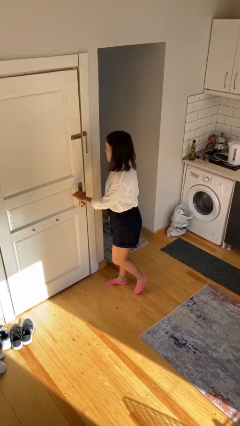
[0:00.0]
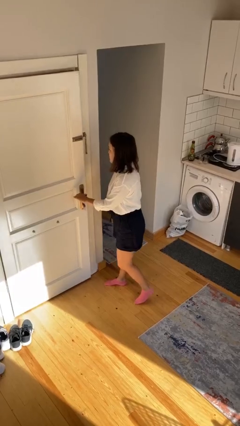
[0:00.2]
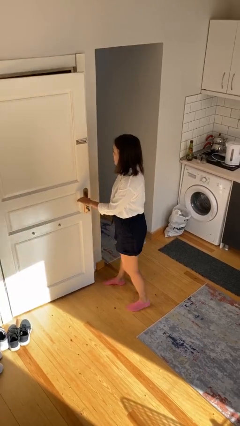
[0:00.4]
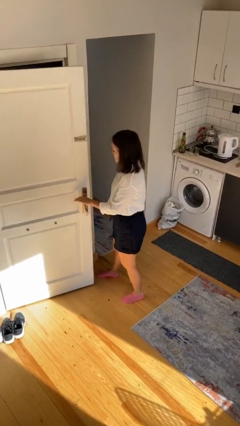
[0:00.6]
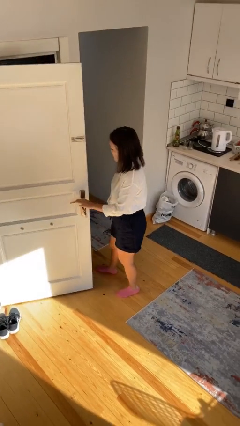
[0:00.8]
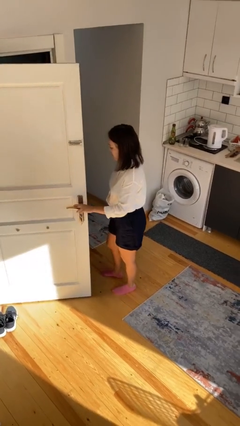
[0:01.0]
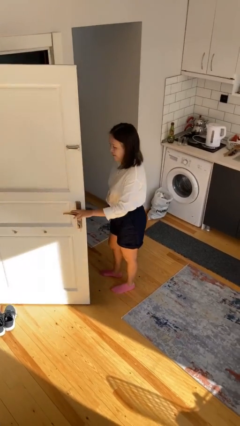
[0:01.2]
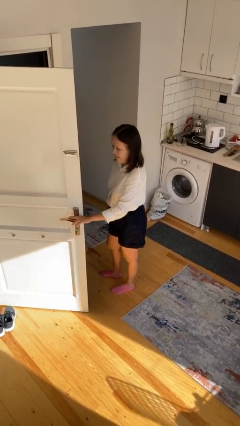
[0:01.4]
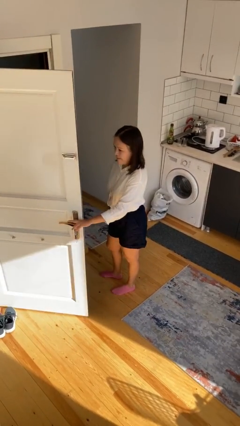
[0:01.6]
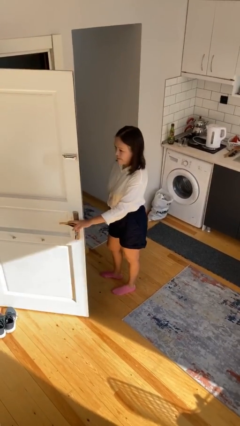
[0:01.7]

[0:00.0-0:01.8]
person opens facility door

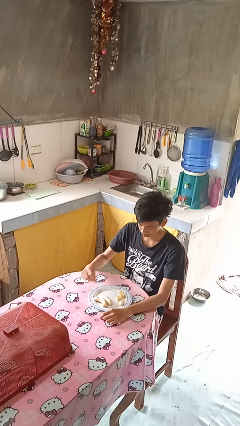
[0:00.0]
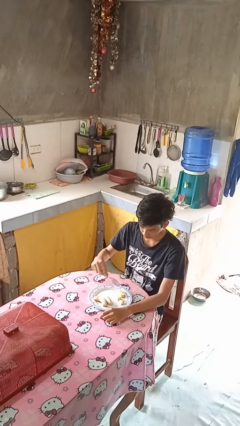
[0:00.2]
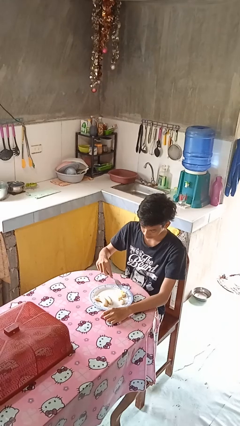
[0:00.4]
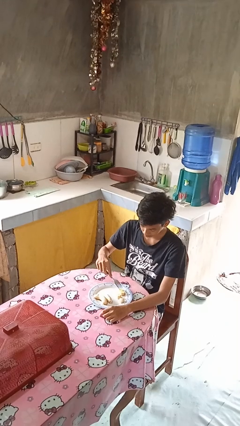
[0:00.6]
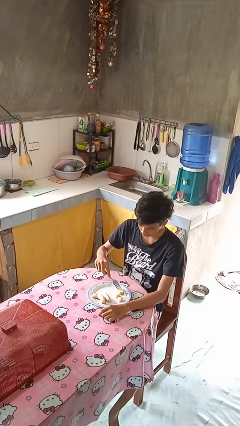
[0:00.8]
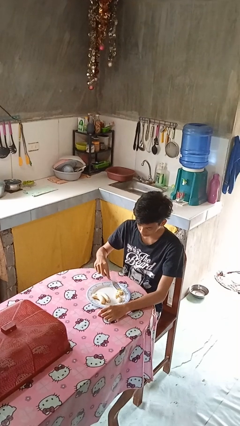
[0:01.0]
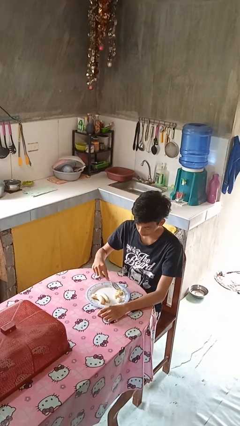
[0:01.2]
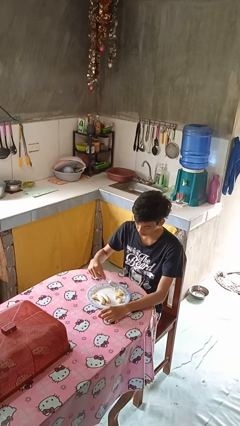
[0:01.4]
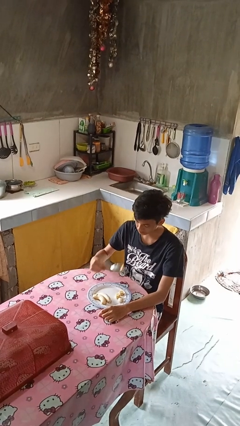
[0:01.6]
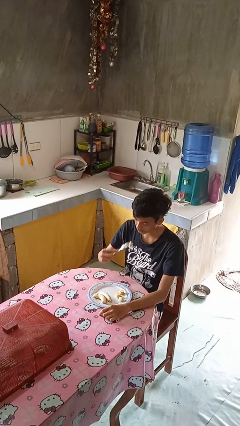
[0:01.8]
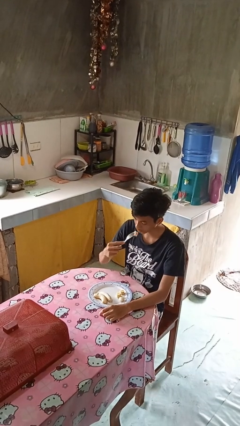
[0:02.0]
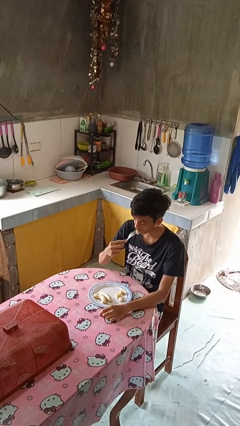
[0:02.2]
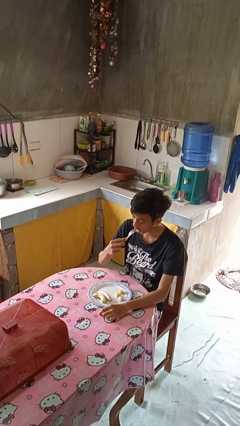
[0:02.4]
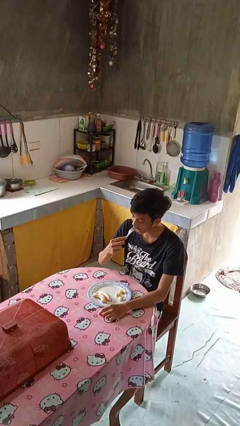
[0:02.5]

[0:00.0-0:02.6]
person eats with utensil

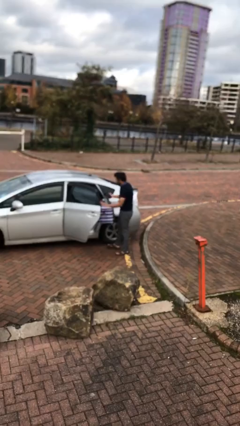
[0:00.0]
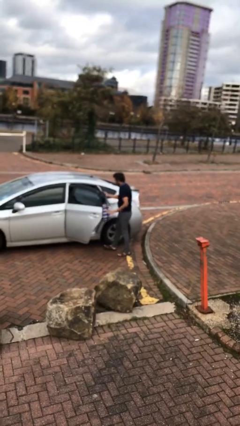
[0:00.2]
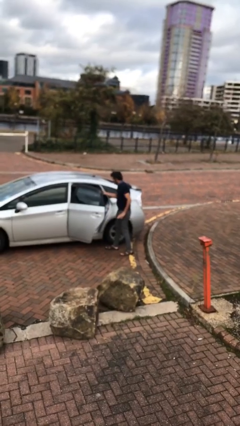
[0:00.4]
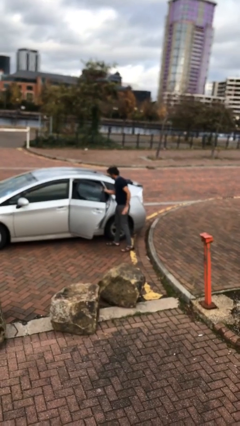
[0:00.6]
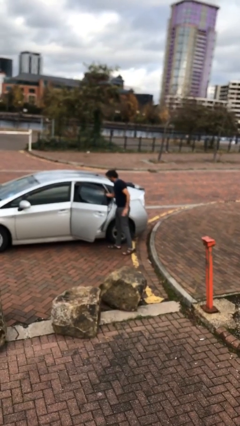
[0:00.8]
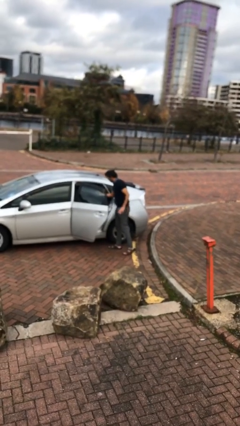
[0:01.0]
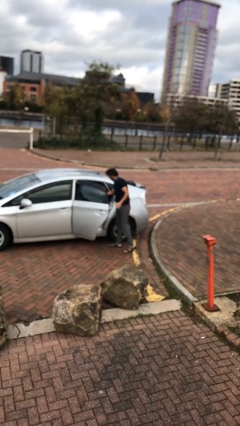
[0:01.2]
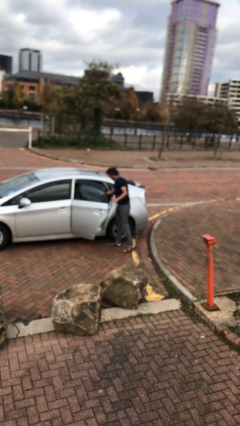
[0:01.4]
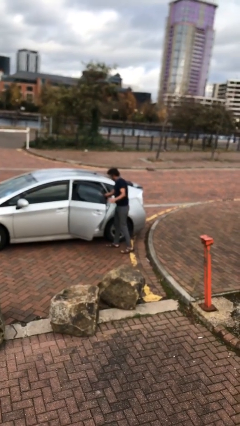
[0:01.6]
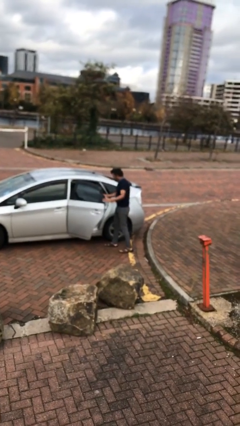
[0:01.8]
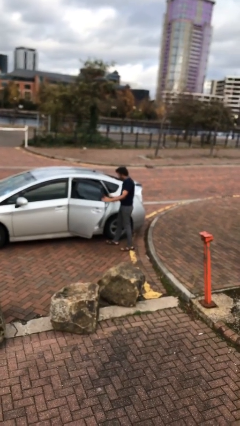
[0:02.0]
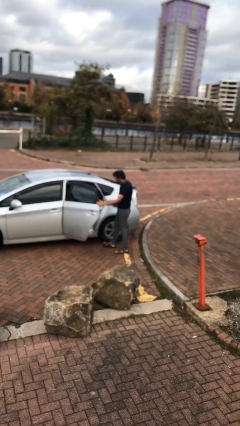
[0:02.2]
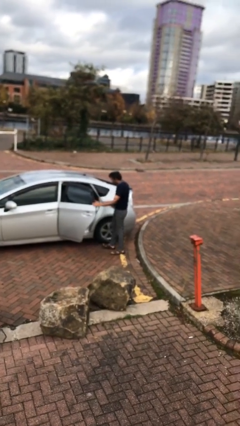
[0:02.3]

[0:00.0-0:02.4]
person loads car

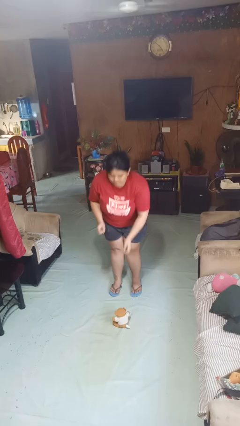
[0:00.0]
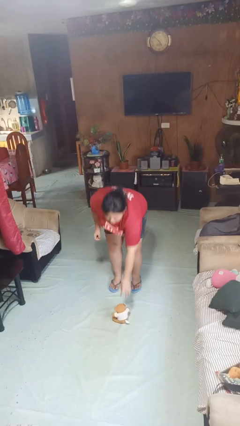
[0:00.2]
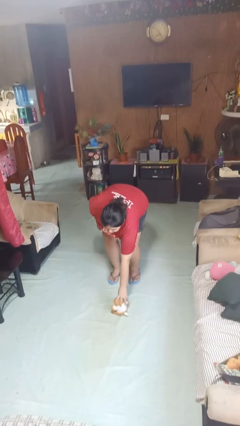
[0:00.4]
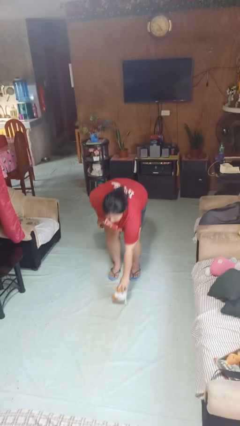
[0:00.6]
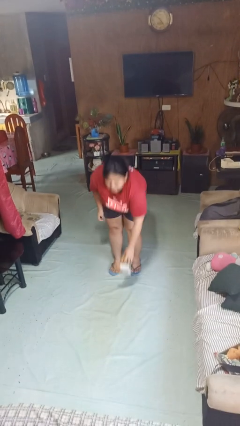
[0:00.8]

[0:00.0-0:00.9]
person picks up object from floor

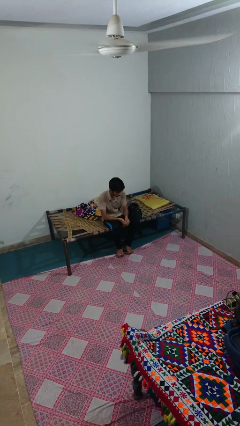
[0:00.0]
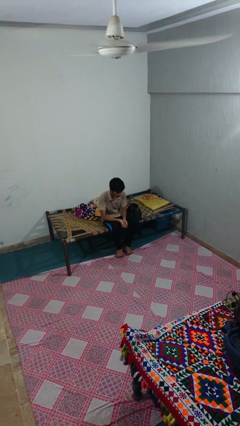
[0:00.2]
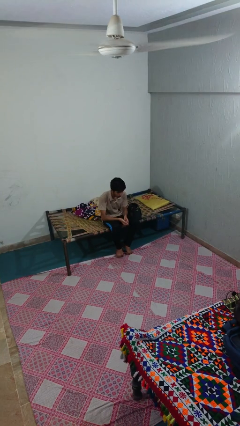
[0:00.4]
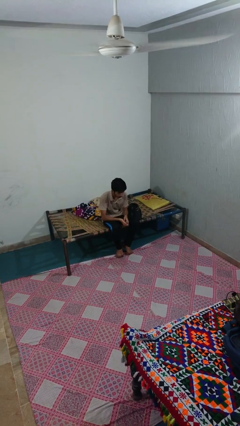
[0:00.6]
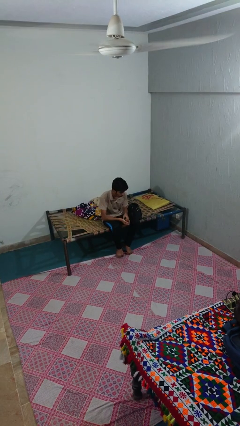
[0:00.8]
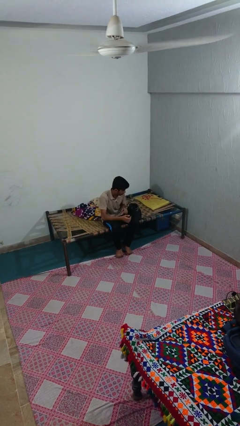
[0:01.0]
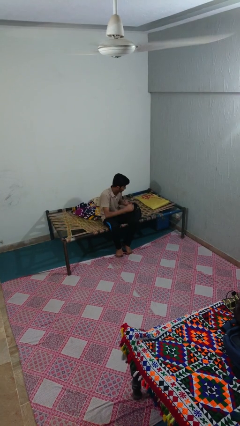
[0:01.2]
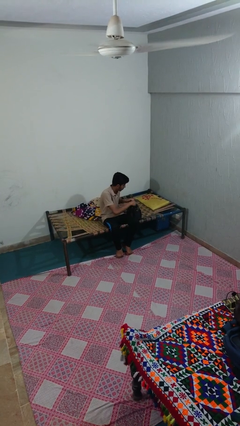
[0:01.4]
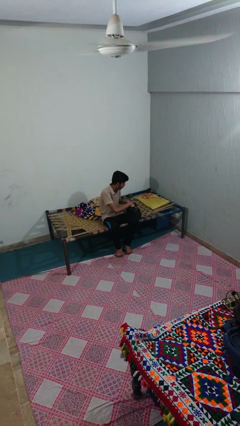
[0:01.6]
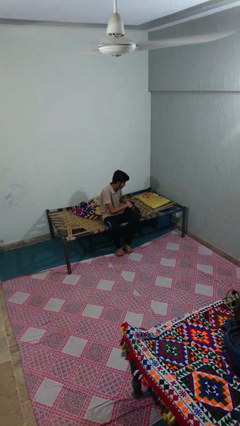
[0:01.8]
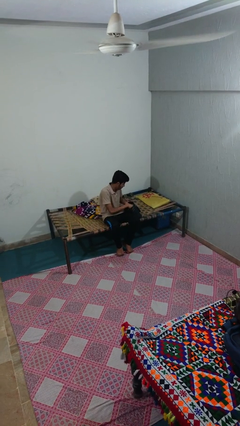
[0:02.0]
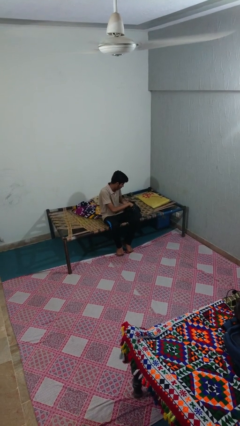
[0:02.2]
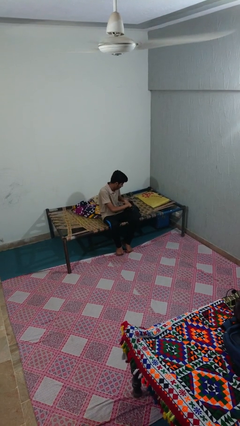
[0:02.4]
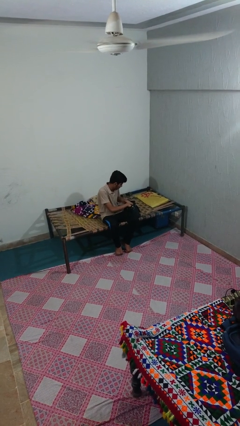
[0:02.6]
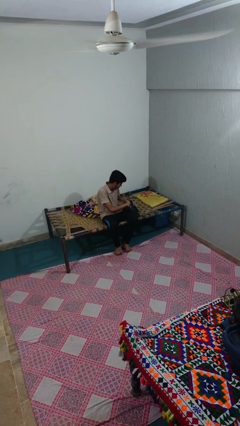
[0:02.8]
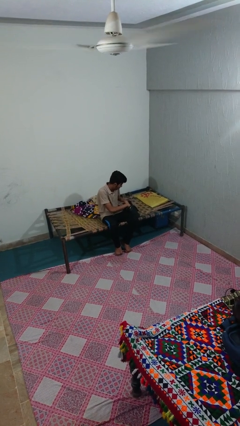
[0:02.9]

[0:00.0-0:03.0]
person searches in purse

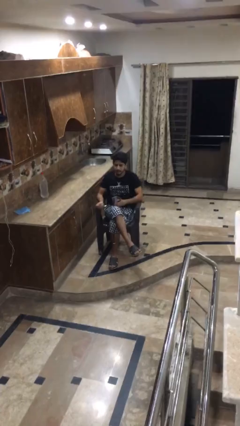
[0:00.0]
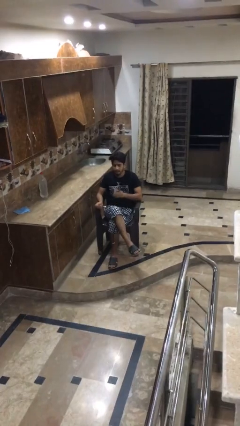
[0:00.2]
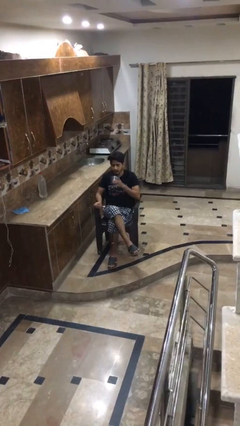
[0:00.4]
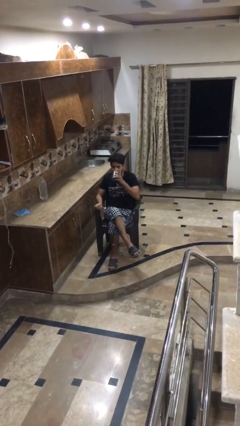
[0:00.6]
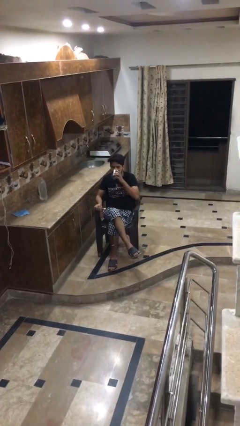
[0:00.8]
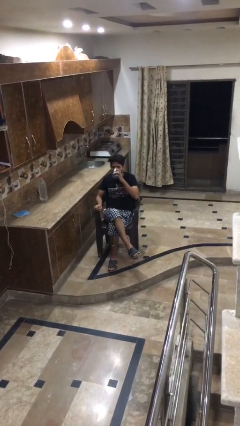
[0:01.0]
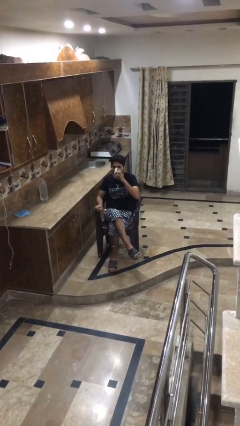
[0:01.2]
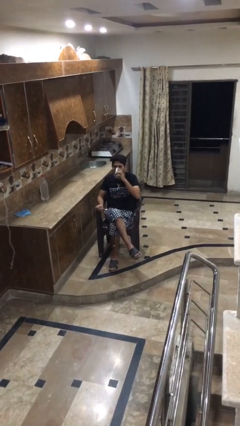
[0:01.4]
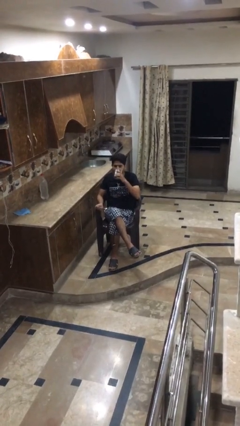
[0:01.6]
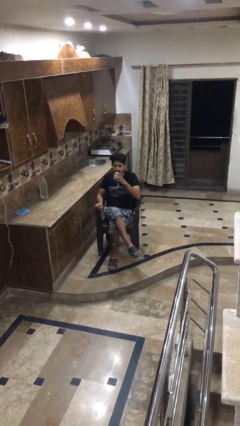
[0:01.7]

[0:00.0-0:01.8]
person drinks from mug

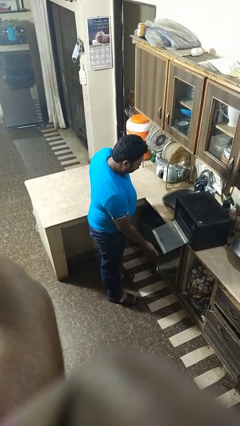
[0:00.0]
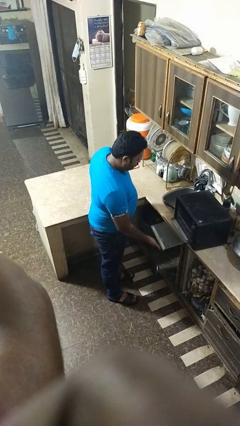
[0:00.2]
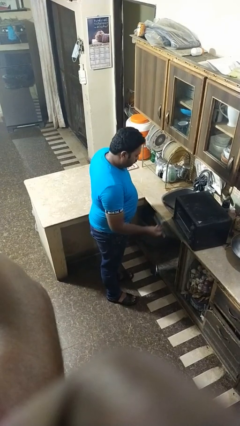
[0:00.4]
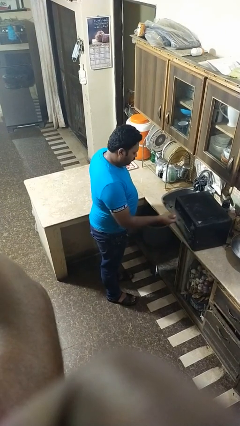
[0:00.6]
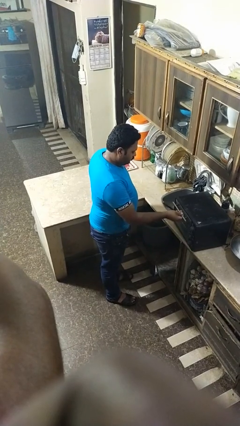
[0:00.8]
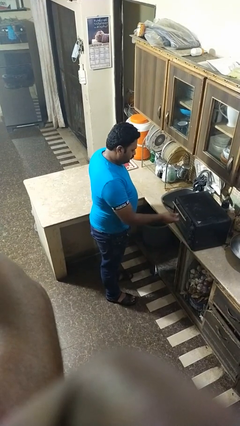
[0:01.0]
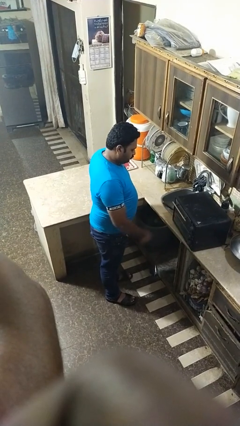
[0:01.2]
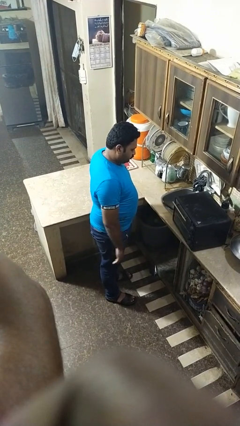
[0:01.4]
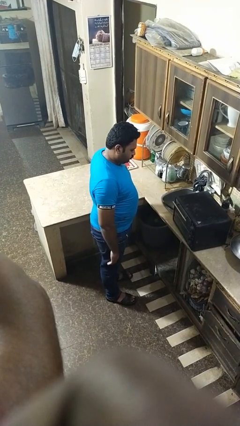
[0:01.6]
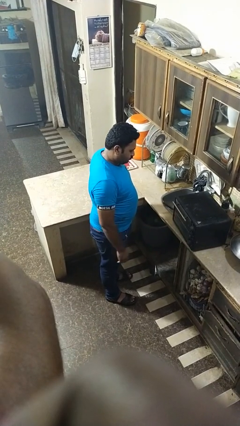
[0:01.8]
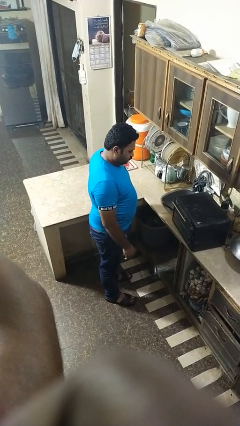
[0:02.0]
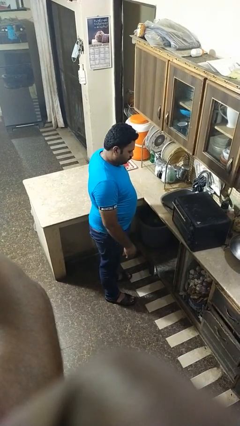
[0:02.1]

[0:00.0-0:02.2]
person closes oven door

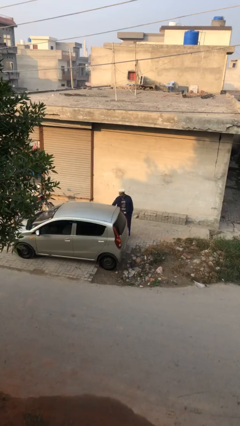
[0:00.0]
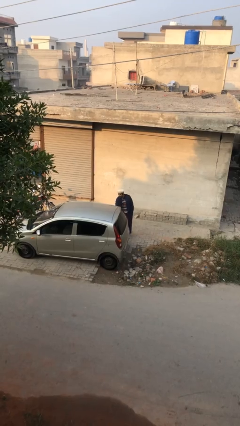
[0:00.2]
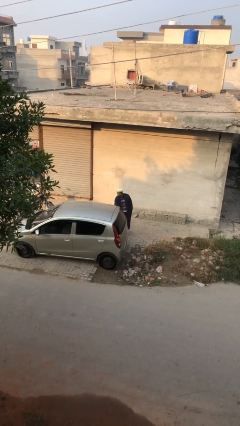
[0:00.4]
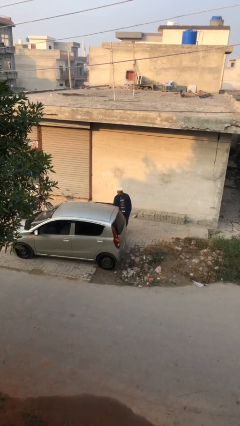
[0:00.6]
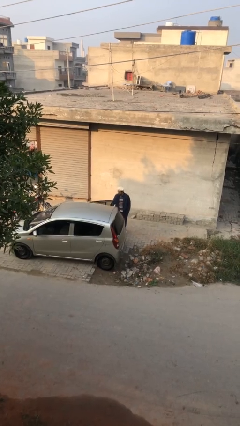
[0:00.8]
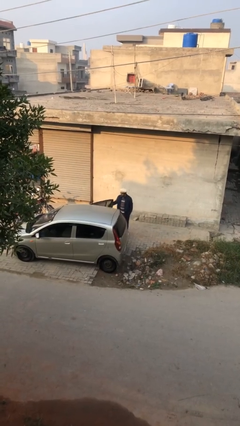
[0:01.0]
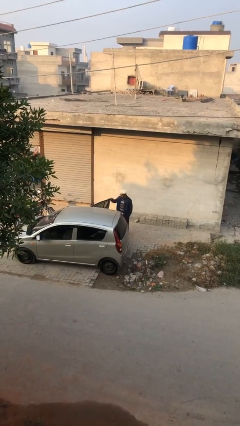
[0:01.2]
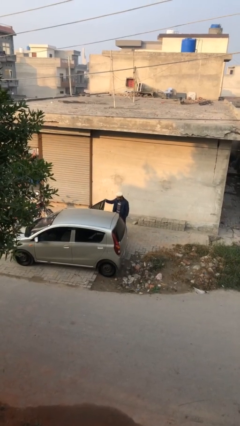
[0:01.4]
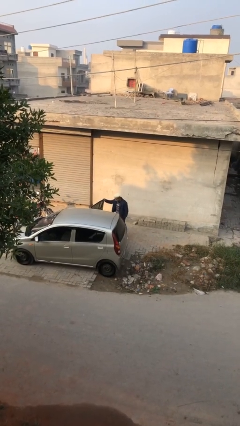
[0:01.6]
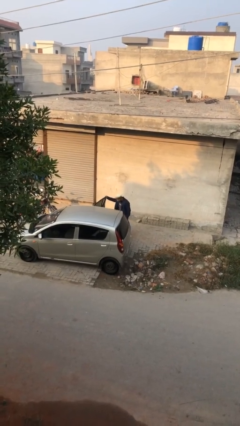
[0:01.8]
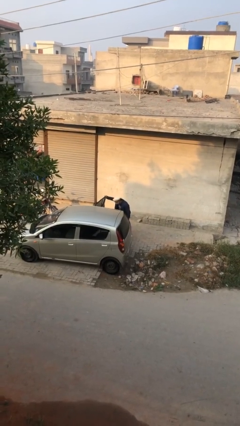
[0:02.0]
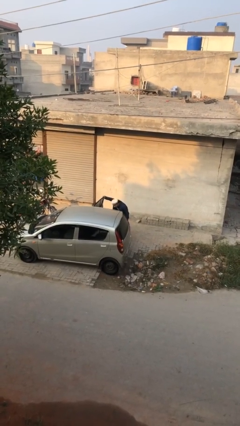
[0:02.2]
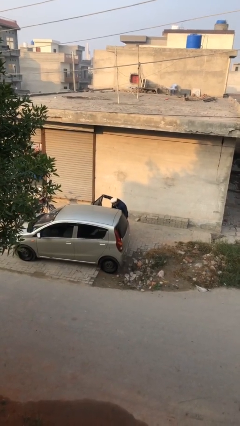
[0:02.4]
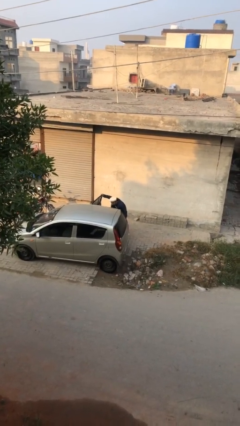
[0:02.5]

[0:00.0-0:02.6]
person opens car door
